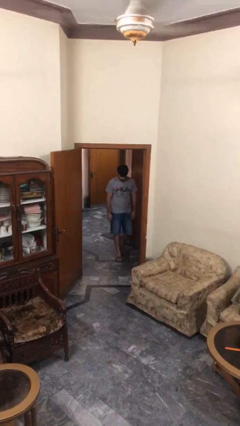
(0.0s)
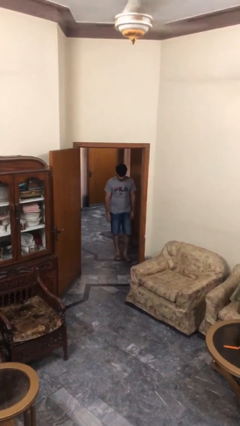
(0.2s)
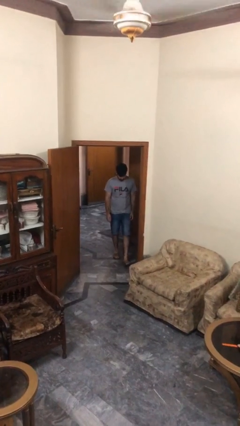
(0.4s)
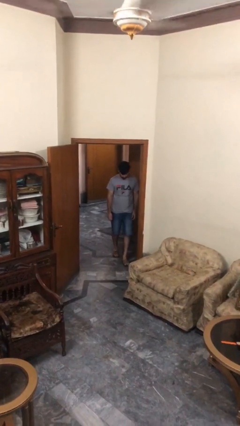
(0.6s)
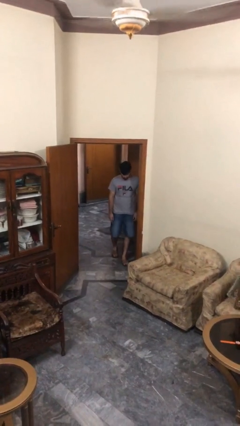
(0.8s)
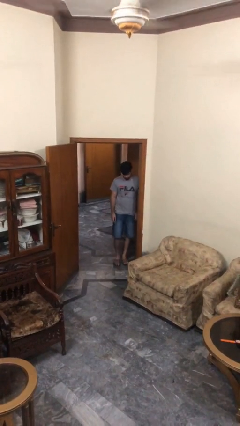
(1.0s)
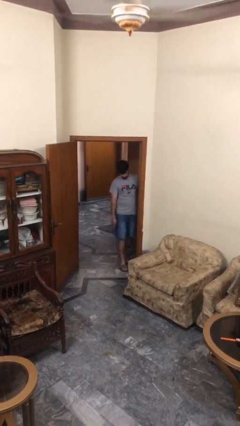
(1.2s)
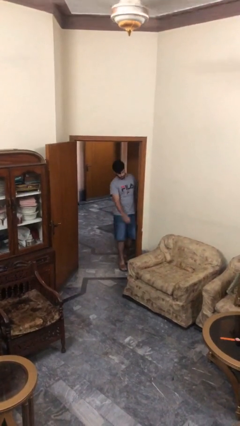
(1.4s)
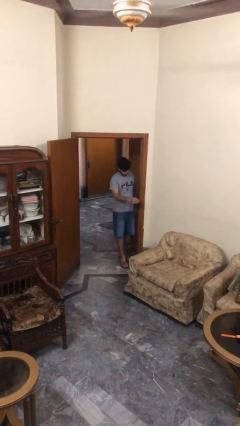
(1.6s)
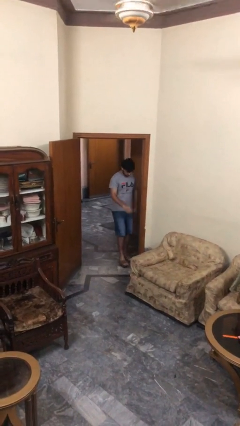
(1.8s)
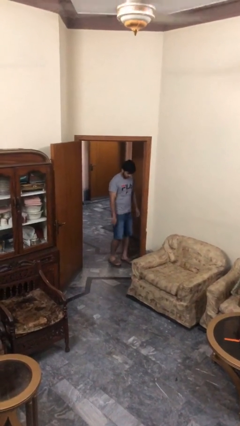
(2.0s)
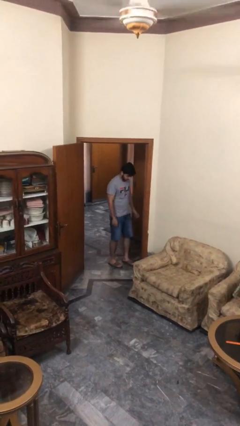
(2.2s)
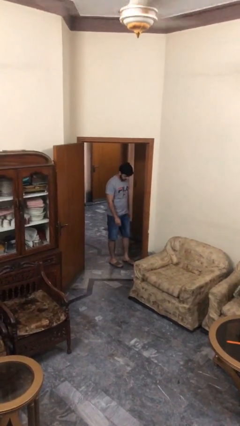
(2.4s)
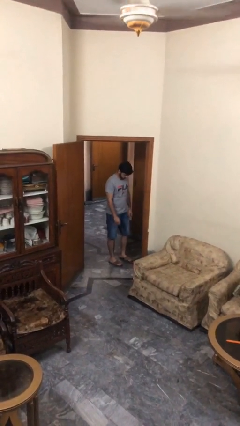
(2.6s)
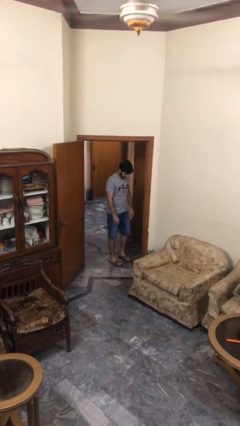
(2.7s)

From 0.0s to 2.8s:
person bumps into wall

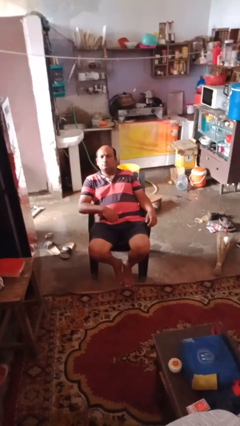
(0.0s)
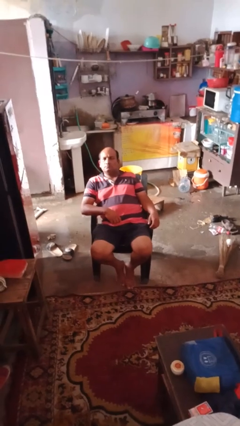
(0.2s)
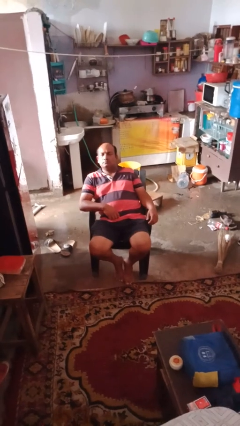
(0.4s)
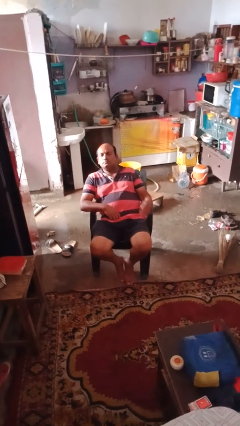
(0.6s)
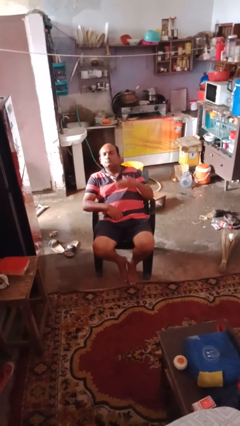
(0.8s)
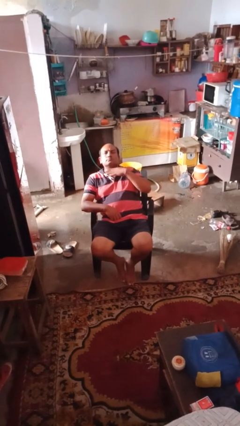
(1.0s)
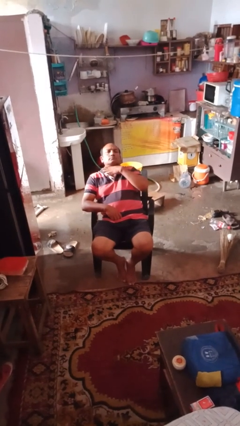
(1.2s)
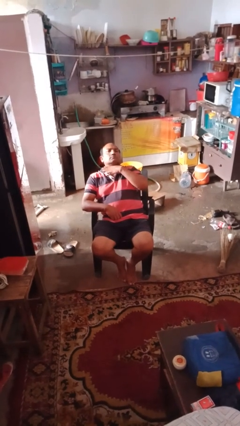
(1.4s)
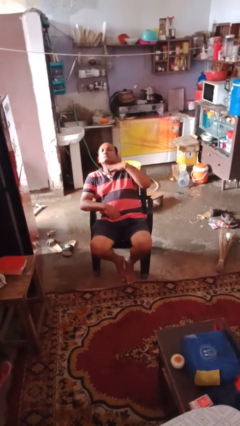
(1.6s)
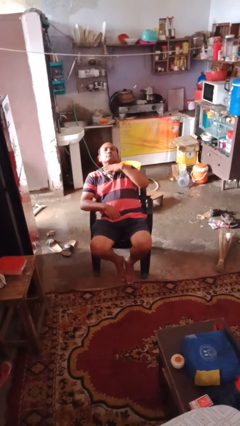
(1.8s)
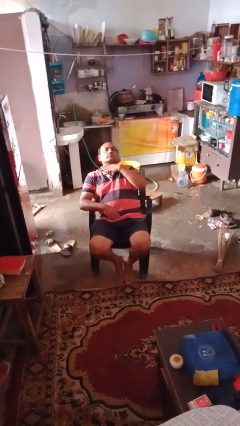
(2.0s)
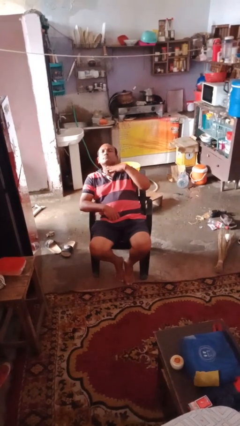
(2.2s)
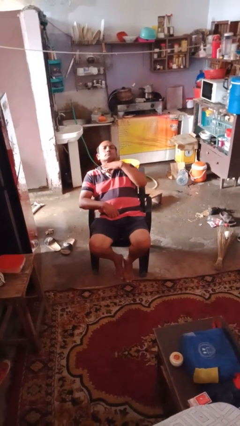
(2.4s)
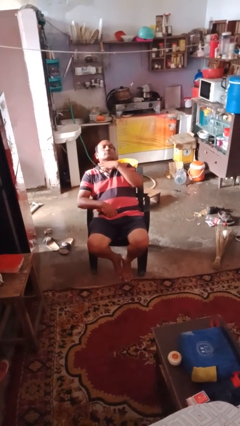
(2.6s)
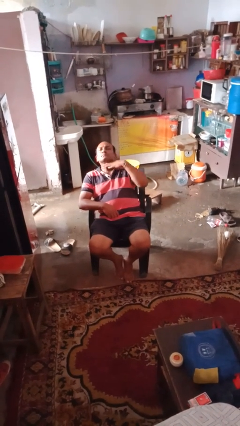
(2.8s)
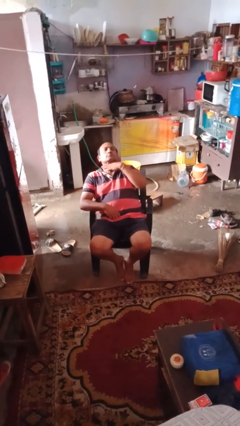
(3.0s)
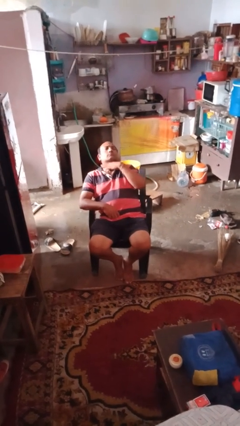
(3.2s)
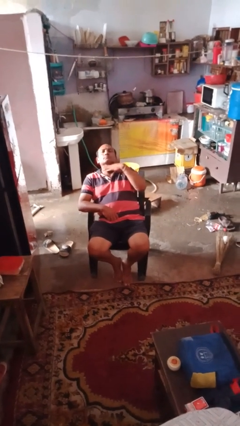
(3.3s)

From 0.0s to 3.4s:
person gestures cut

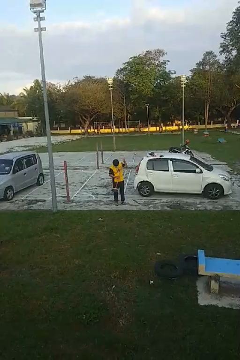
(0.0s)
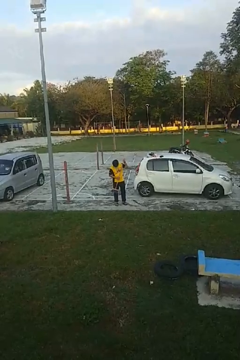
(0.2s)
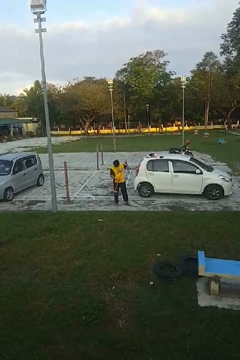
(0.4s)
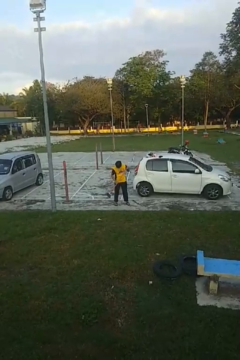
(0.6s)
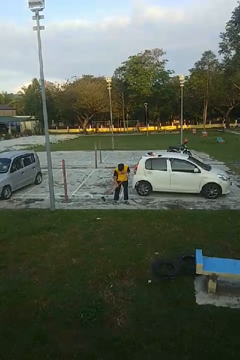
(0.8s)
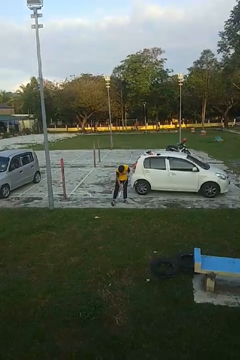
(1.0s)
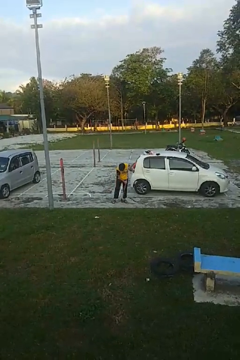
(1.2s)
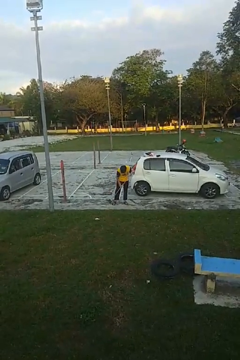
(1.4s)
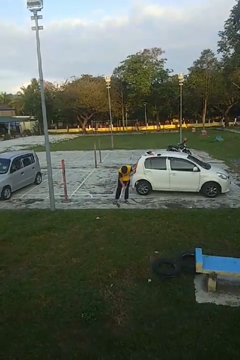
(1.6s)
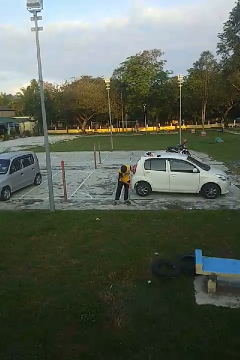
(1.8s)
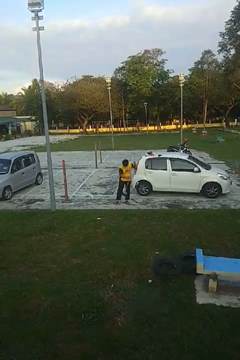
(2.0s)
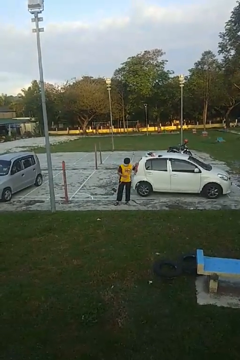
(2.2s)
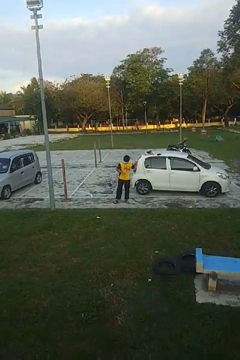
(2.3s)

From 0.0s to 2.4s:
person sweeps floor

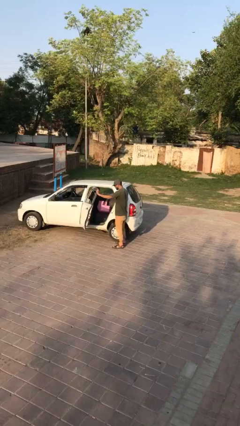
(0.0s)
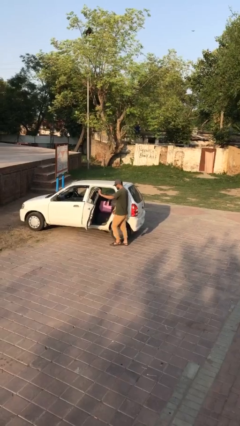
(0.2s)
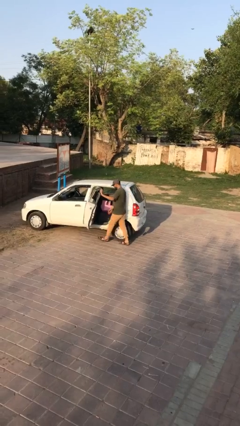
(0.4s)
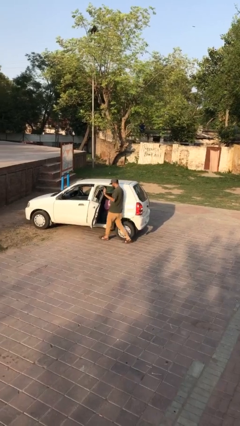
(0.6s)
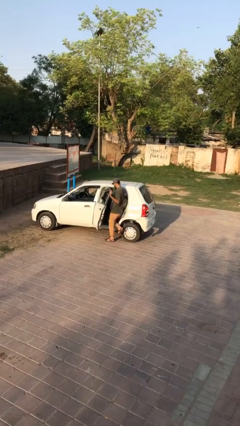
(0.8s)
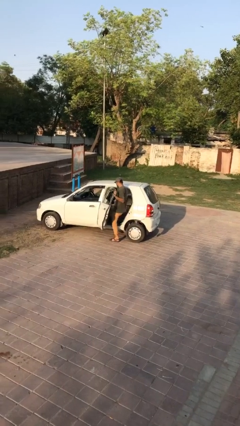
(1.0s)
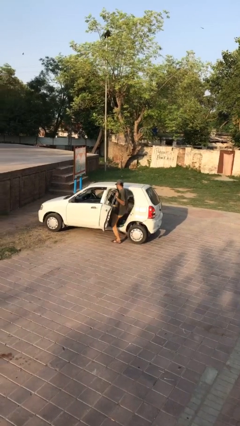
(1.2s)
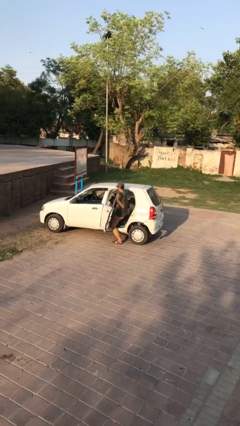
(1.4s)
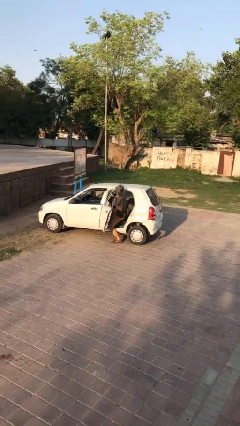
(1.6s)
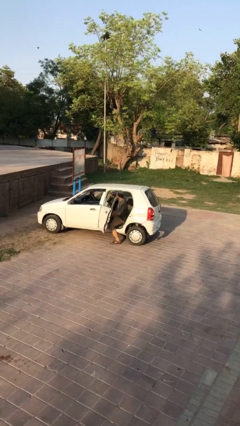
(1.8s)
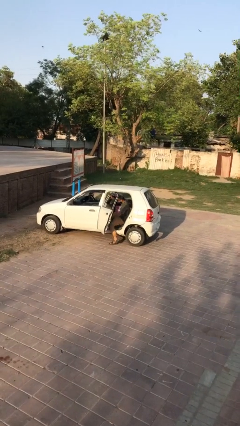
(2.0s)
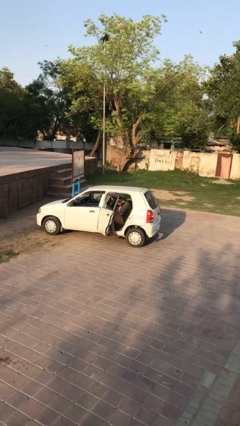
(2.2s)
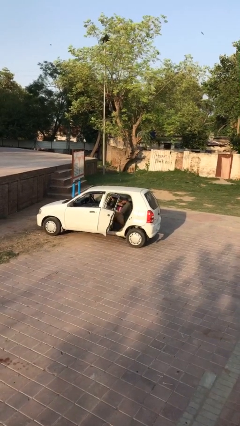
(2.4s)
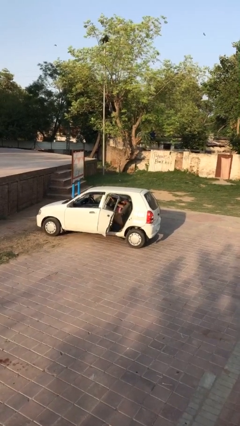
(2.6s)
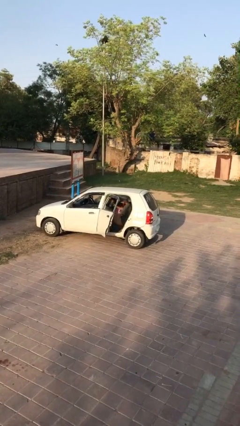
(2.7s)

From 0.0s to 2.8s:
person enters car

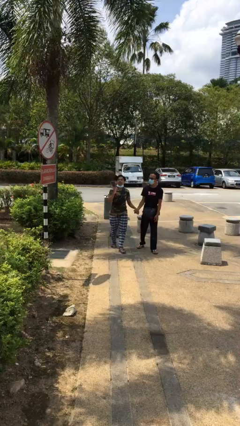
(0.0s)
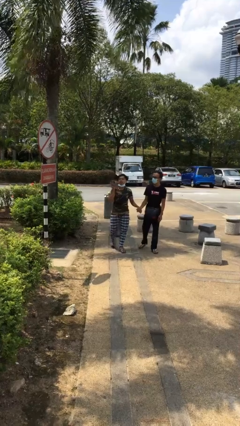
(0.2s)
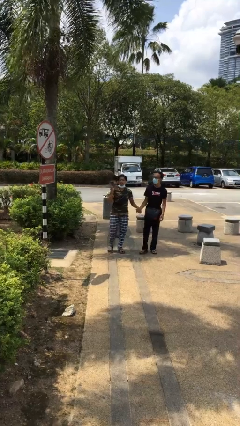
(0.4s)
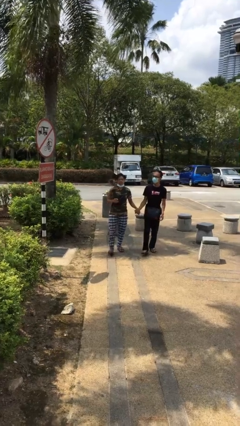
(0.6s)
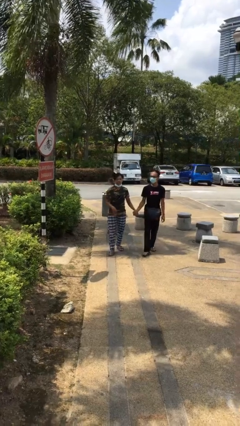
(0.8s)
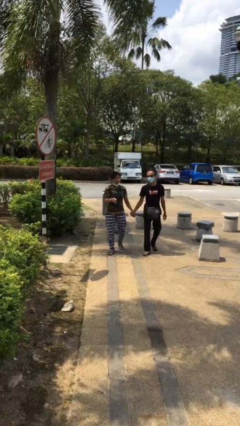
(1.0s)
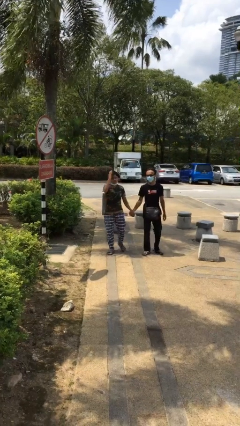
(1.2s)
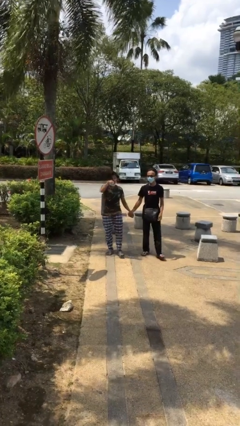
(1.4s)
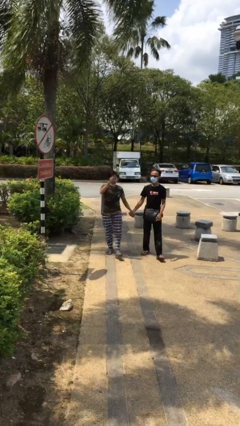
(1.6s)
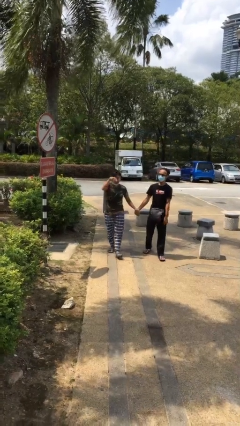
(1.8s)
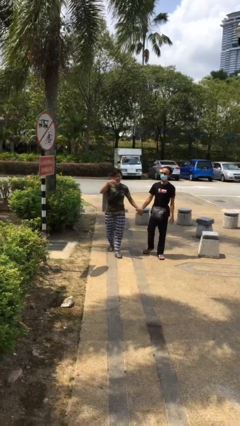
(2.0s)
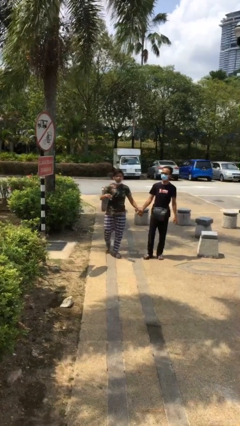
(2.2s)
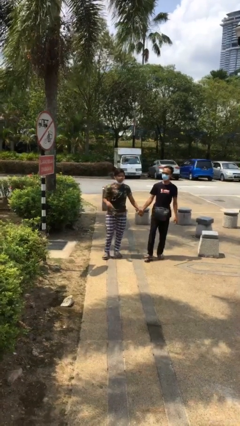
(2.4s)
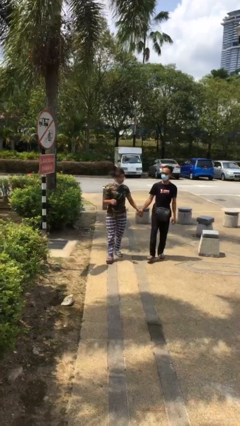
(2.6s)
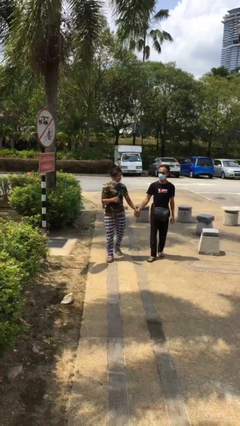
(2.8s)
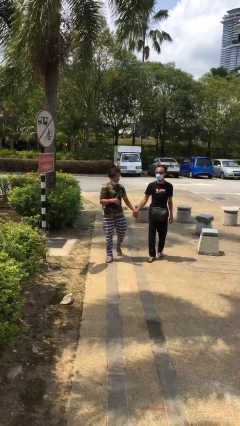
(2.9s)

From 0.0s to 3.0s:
person holds hand

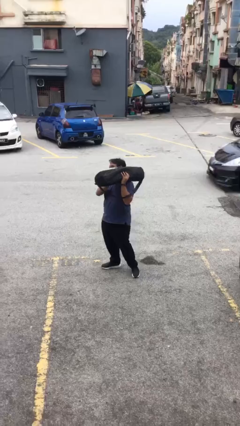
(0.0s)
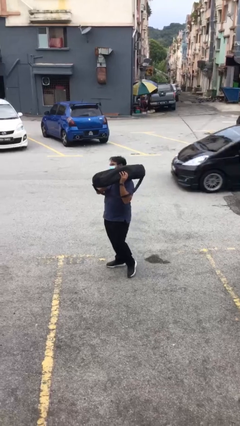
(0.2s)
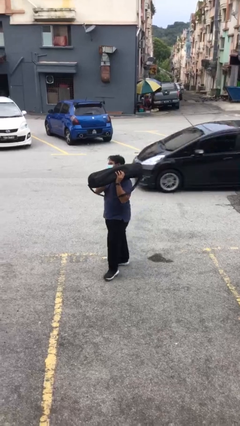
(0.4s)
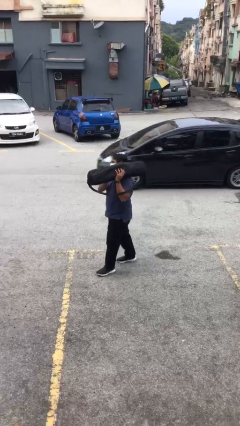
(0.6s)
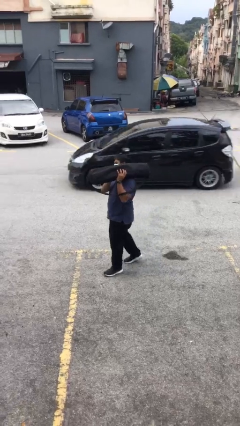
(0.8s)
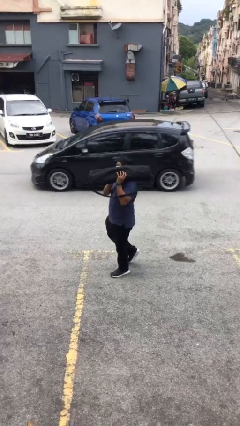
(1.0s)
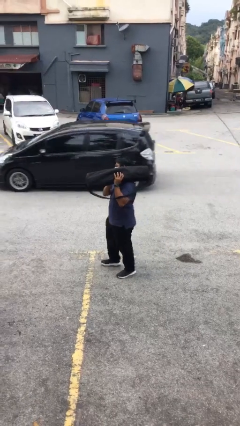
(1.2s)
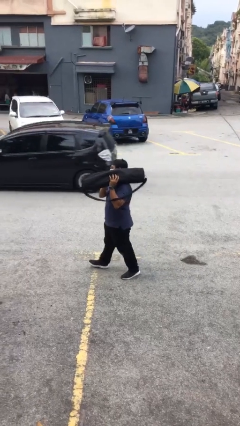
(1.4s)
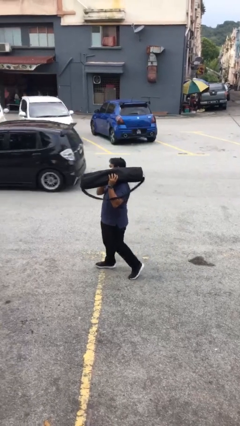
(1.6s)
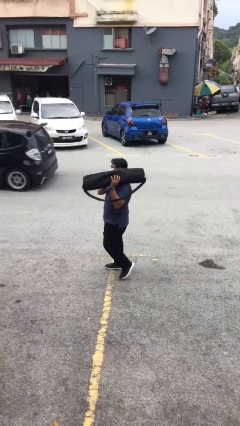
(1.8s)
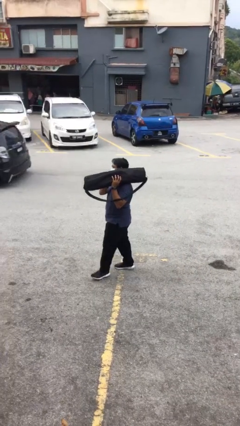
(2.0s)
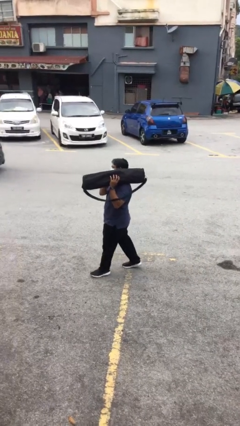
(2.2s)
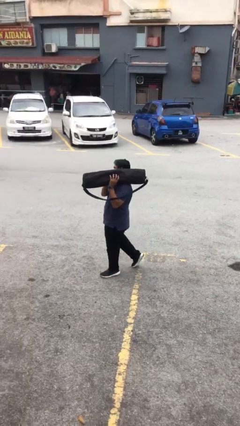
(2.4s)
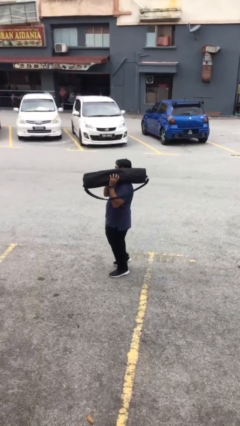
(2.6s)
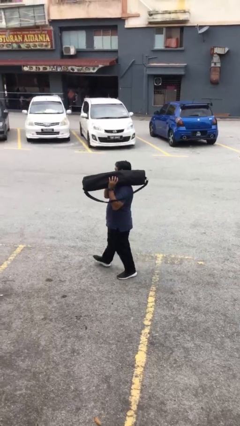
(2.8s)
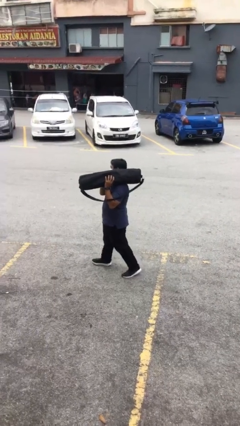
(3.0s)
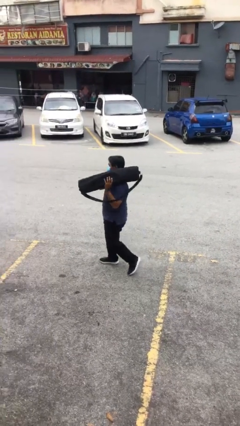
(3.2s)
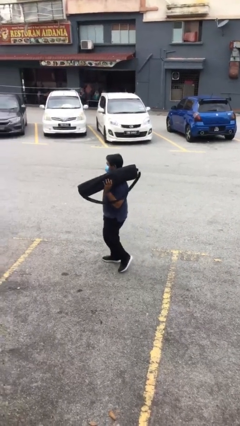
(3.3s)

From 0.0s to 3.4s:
person carries heavy object
